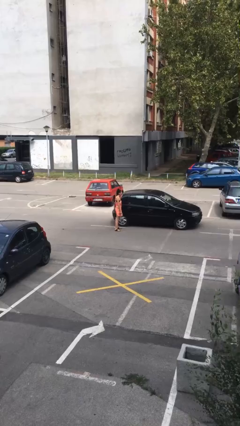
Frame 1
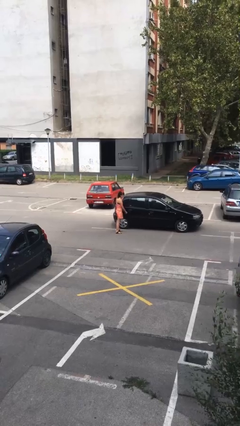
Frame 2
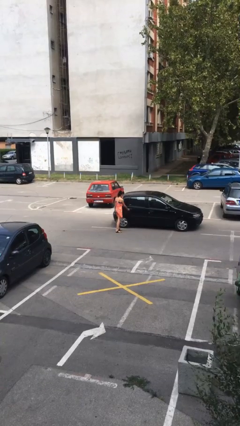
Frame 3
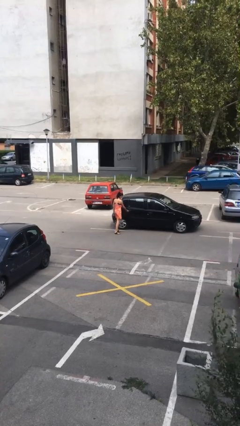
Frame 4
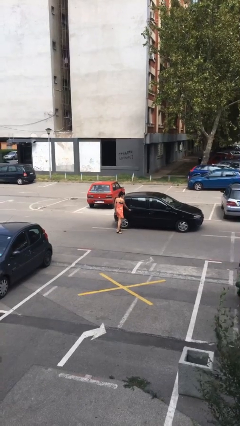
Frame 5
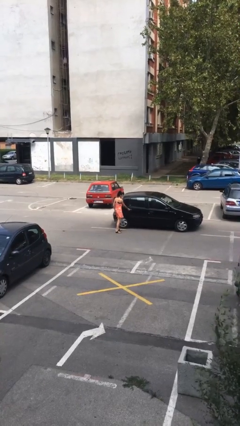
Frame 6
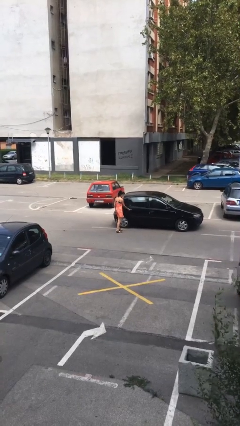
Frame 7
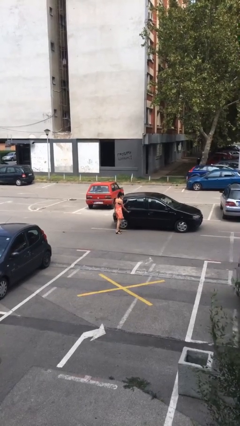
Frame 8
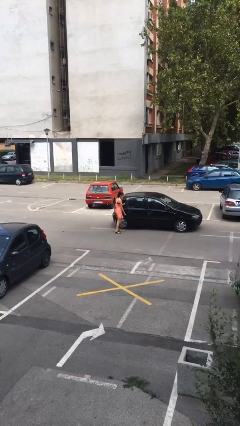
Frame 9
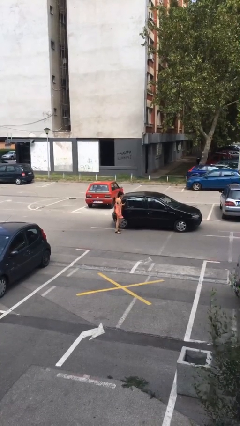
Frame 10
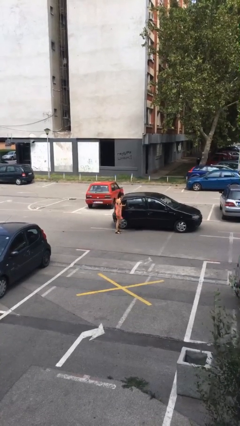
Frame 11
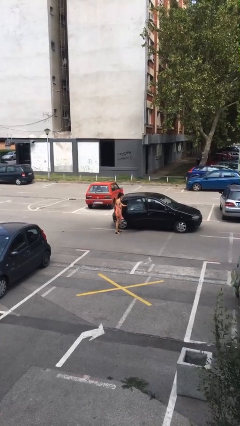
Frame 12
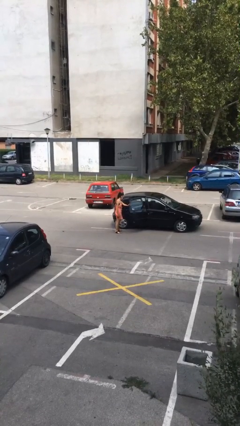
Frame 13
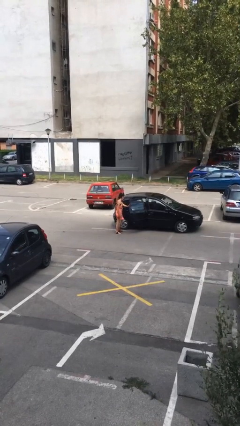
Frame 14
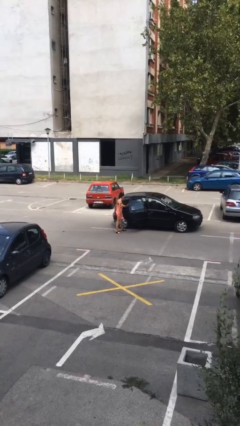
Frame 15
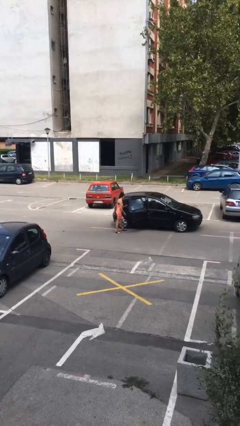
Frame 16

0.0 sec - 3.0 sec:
person opens car door

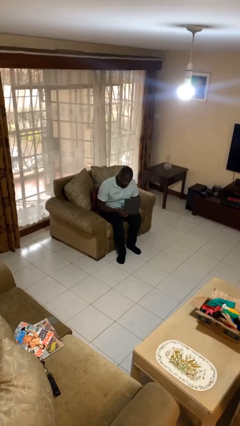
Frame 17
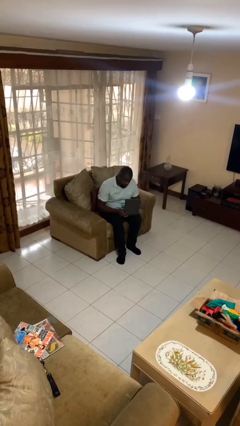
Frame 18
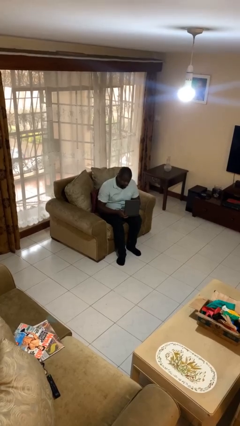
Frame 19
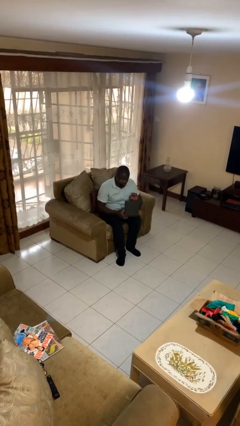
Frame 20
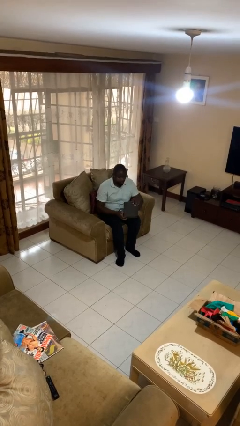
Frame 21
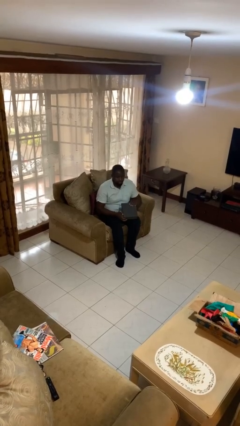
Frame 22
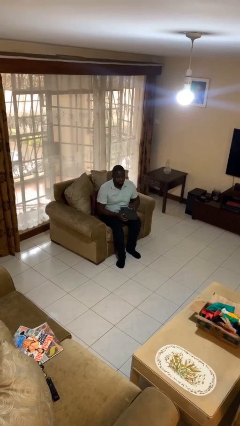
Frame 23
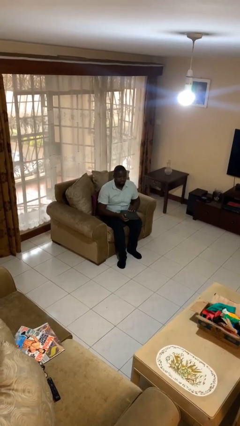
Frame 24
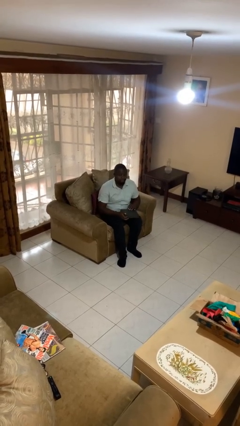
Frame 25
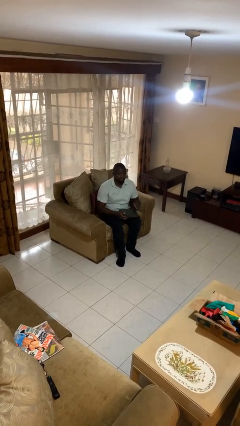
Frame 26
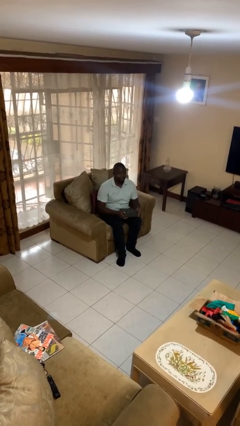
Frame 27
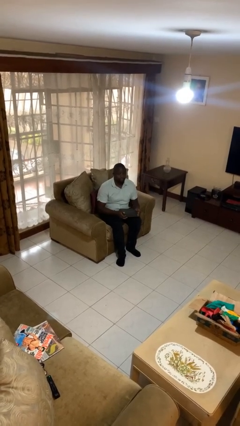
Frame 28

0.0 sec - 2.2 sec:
person closes jewelry box

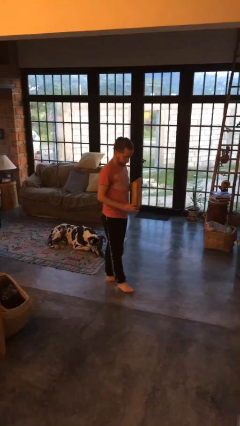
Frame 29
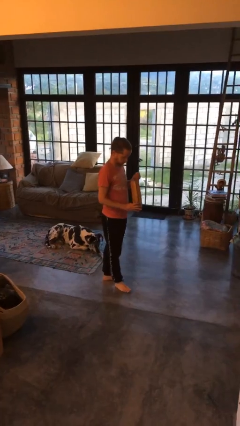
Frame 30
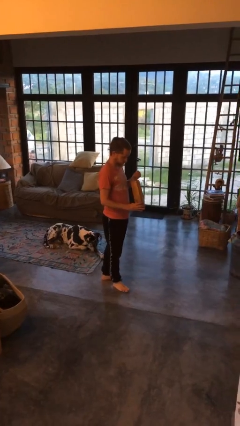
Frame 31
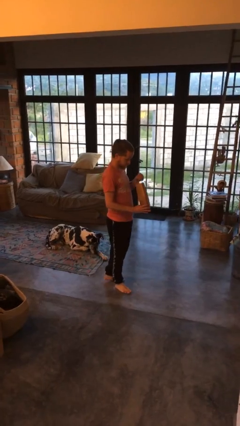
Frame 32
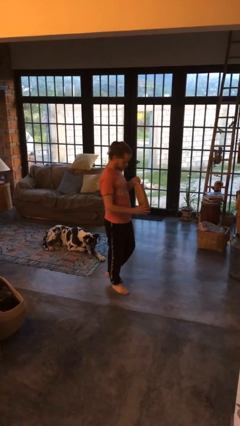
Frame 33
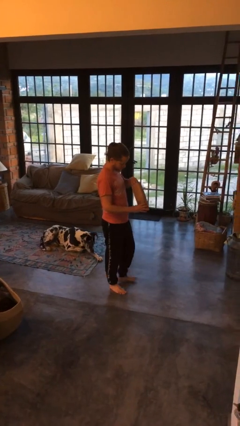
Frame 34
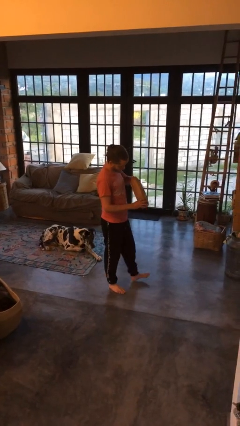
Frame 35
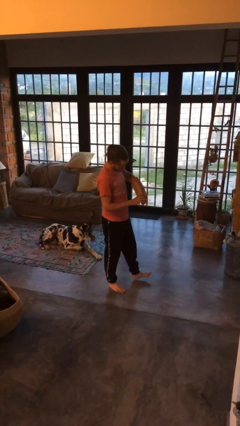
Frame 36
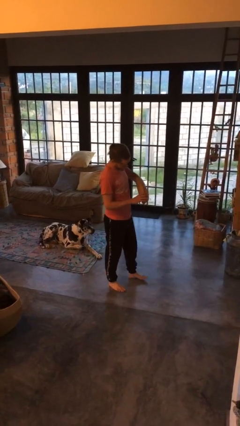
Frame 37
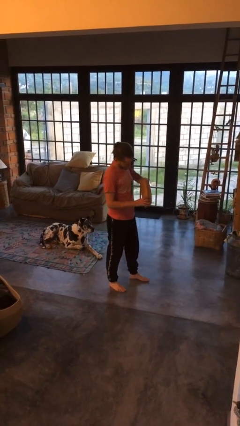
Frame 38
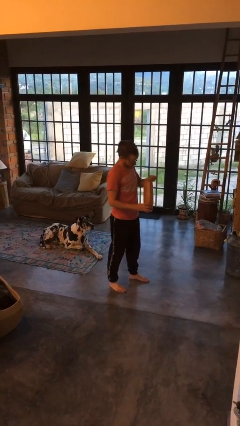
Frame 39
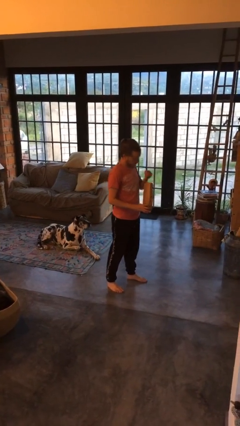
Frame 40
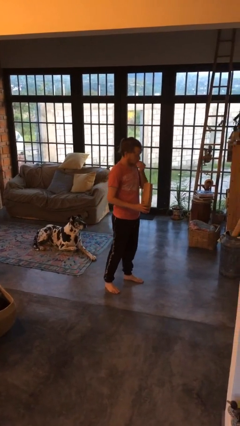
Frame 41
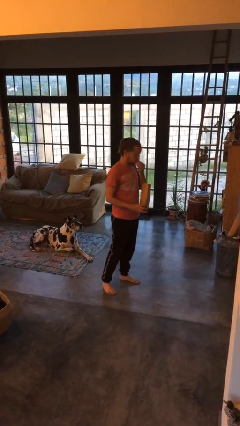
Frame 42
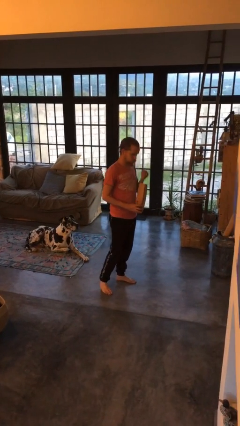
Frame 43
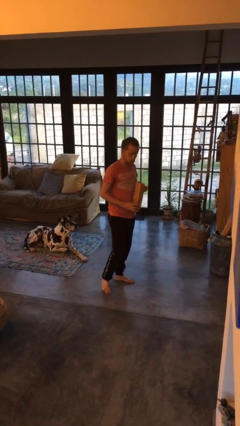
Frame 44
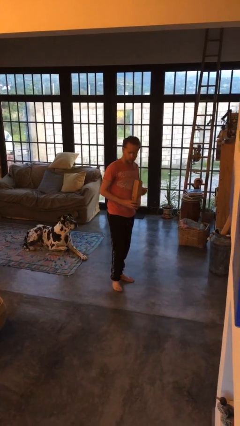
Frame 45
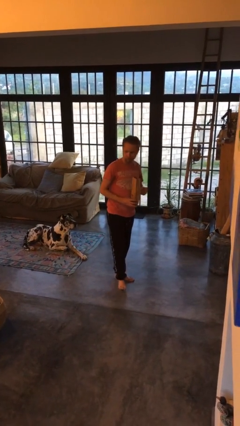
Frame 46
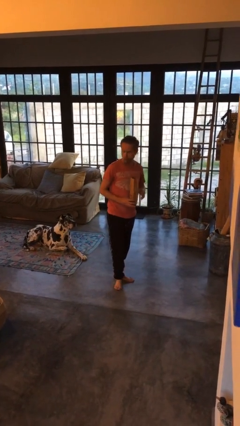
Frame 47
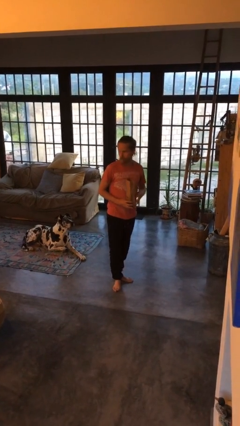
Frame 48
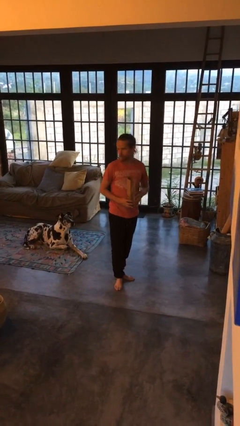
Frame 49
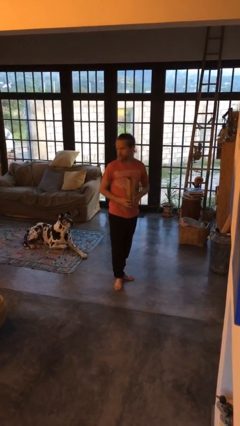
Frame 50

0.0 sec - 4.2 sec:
person eats snack from bag

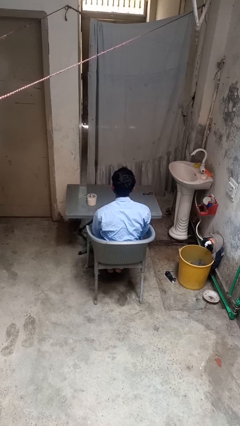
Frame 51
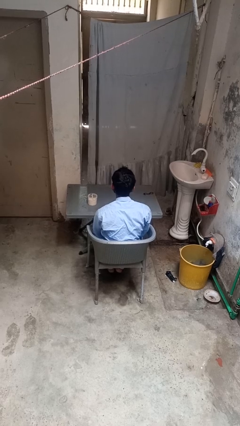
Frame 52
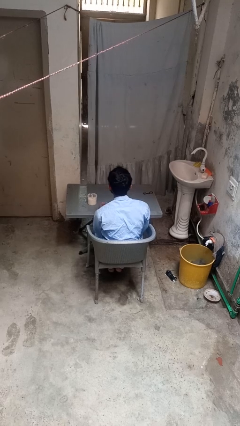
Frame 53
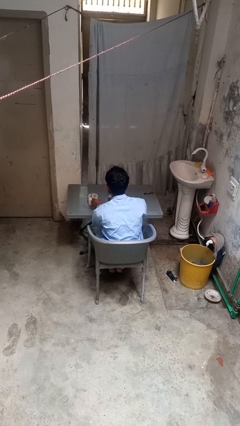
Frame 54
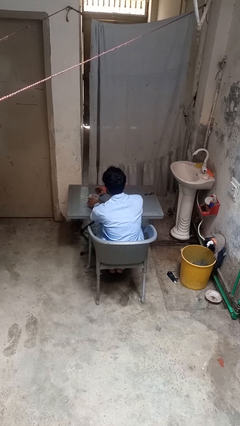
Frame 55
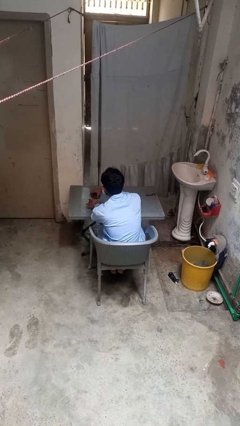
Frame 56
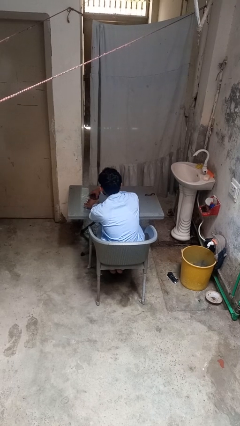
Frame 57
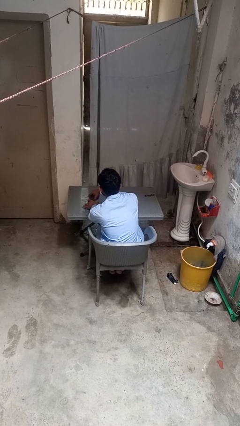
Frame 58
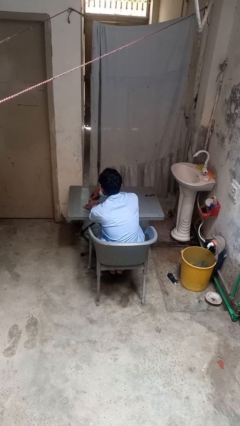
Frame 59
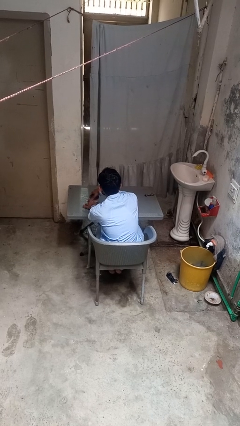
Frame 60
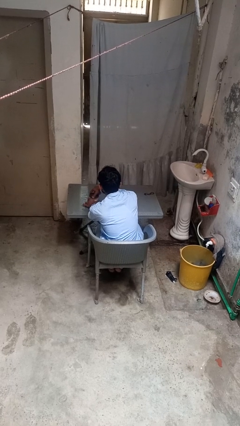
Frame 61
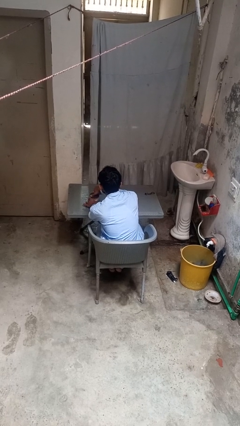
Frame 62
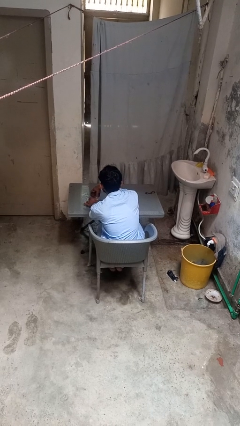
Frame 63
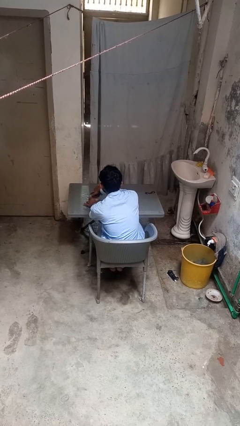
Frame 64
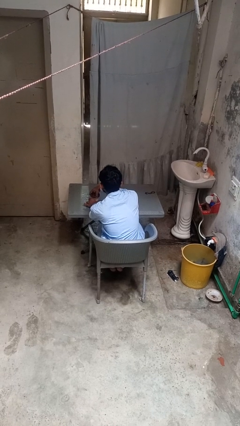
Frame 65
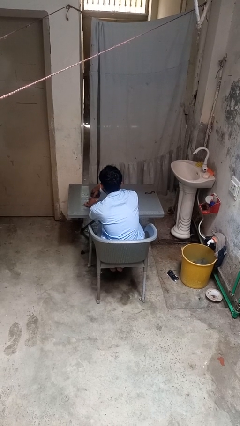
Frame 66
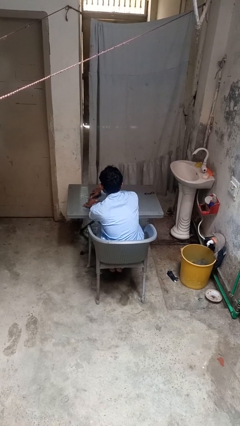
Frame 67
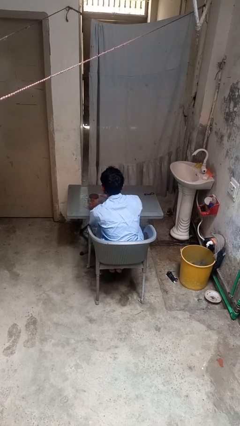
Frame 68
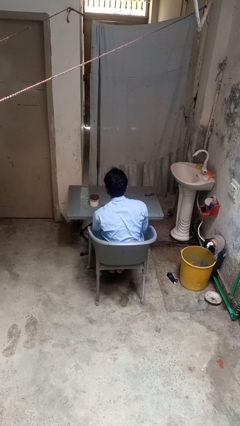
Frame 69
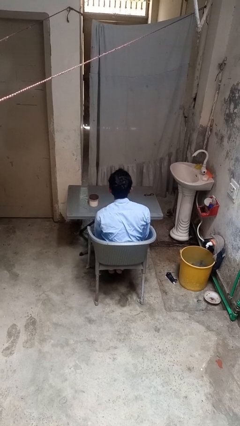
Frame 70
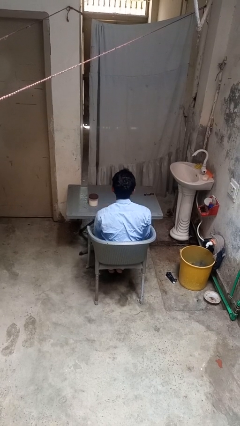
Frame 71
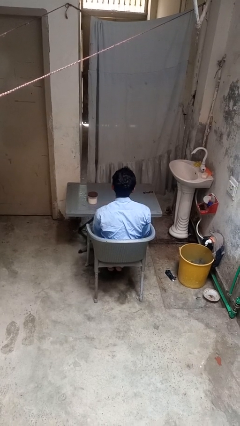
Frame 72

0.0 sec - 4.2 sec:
person closes jar

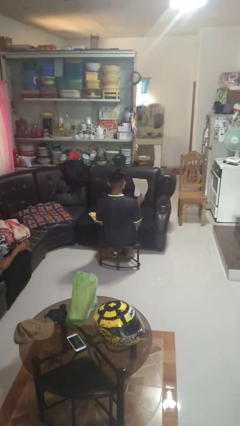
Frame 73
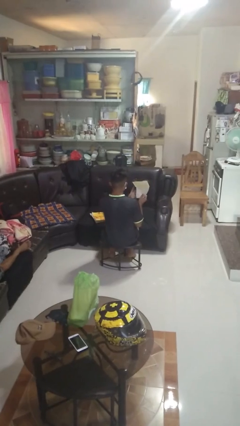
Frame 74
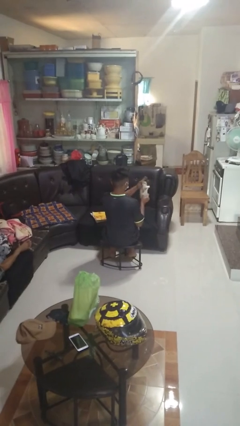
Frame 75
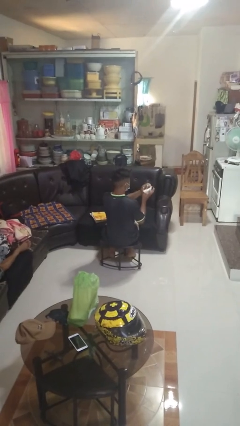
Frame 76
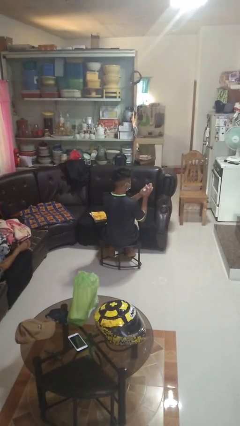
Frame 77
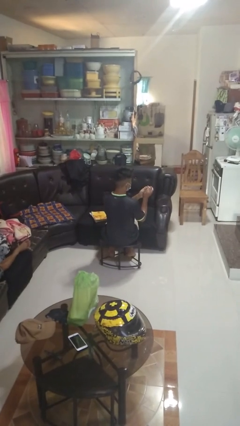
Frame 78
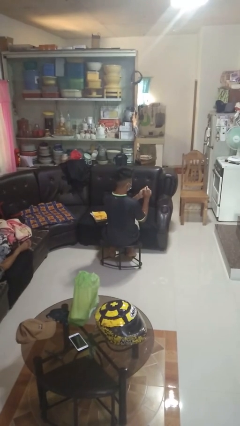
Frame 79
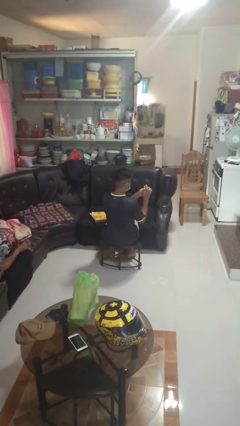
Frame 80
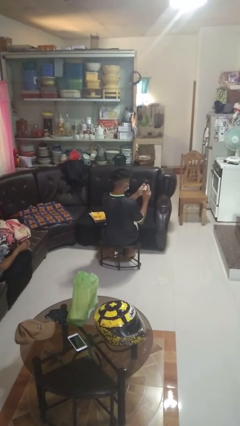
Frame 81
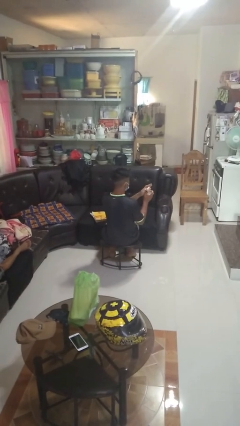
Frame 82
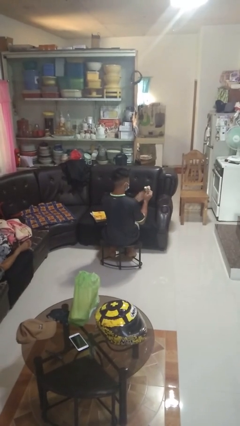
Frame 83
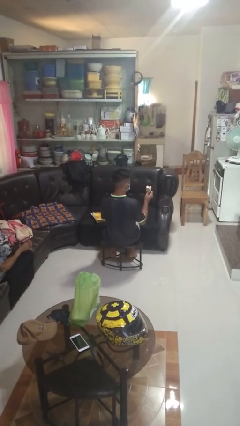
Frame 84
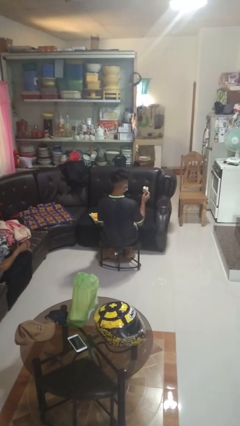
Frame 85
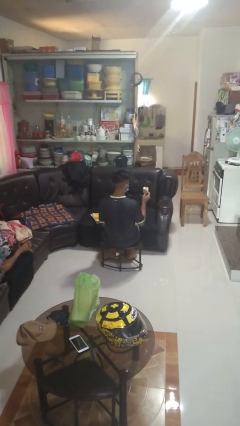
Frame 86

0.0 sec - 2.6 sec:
person crumples paper

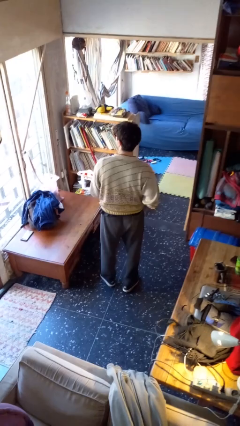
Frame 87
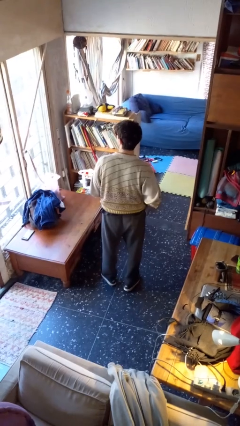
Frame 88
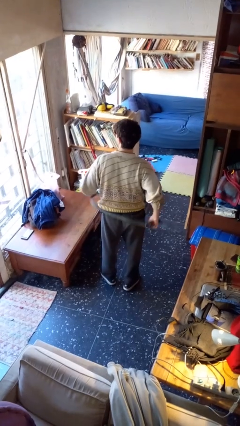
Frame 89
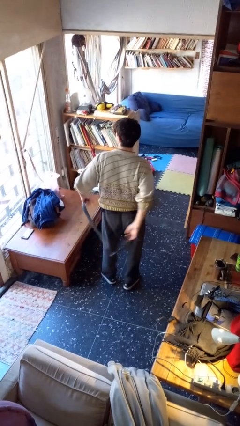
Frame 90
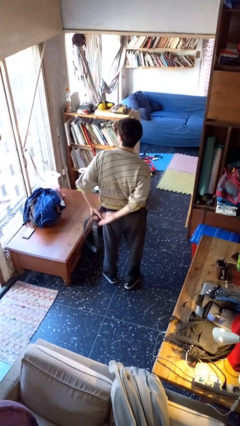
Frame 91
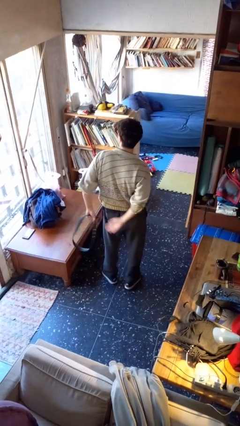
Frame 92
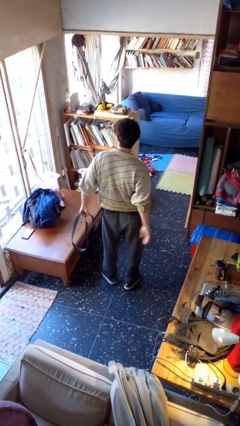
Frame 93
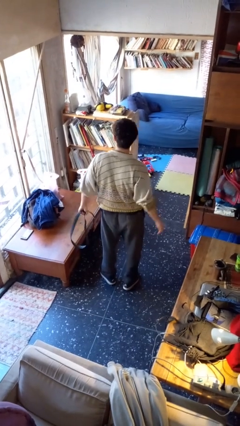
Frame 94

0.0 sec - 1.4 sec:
person takes off belt
